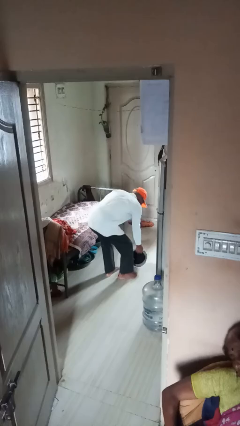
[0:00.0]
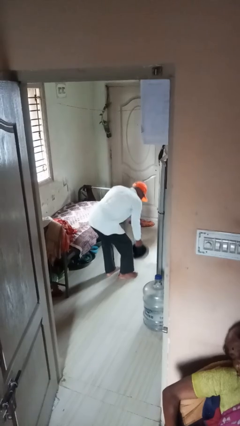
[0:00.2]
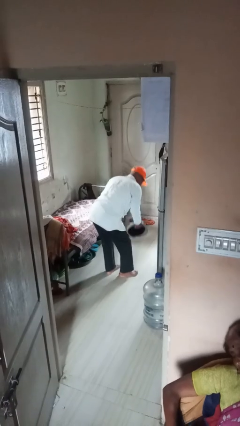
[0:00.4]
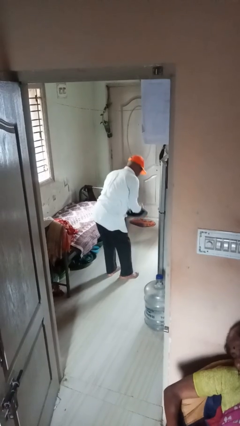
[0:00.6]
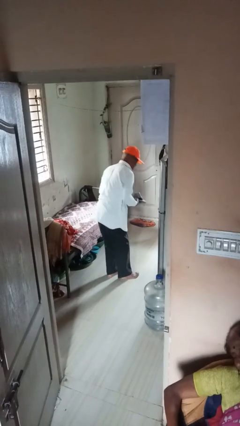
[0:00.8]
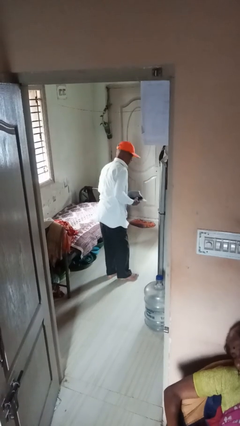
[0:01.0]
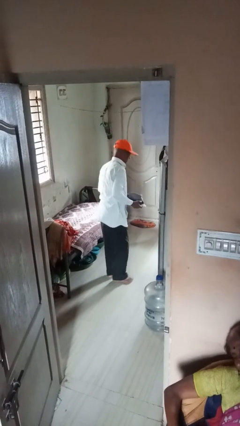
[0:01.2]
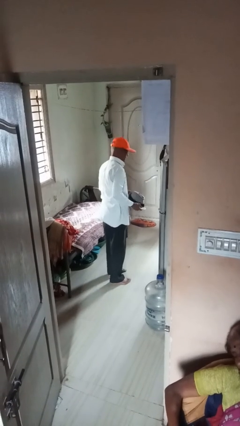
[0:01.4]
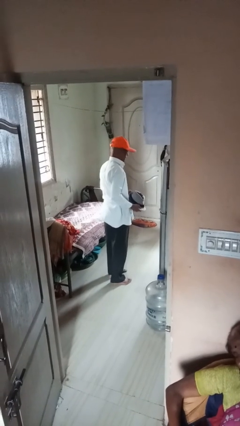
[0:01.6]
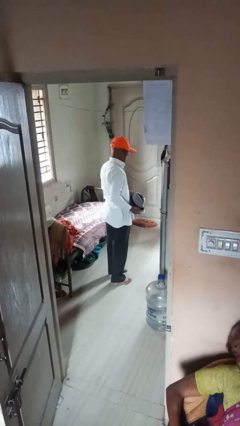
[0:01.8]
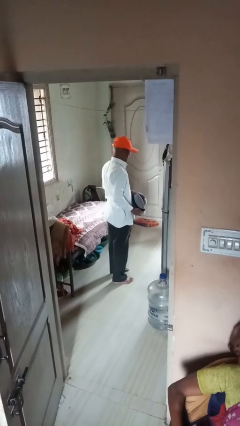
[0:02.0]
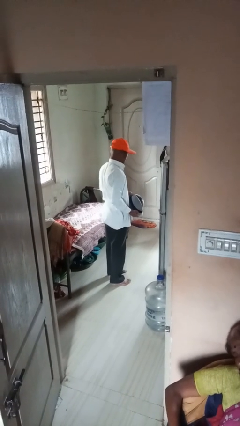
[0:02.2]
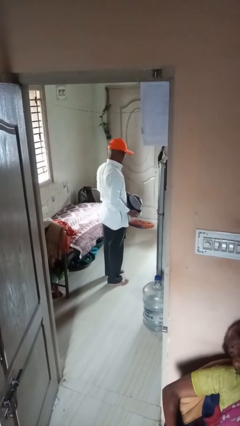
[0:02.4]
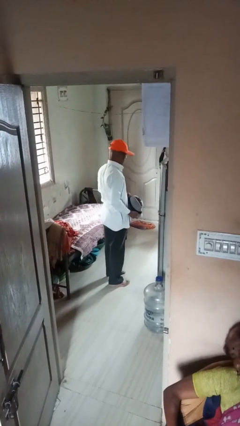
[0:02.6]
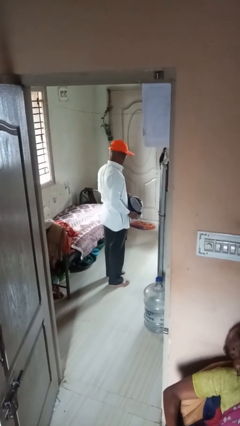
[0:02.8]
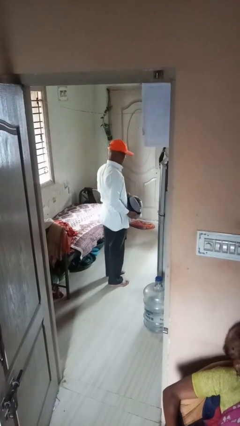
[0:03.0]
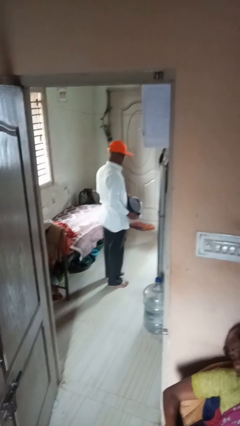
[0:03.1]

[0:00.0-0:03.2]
person picks up object from floor

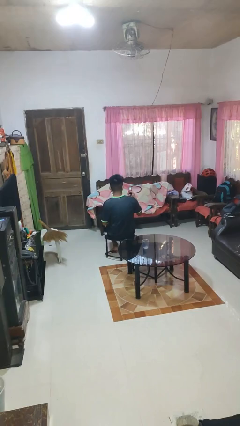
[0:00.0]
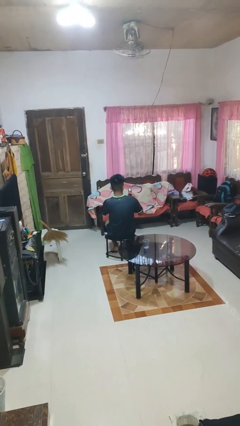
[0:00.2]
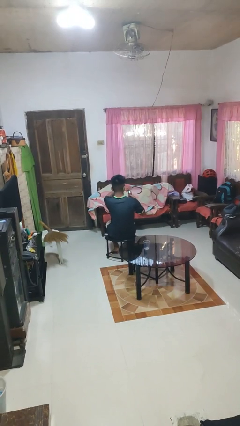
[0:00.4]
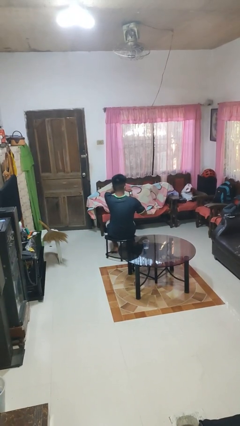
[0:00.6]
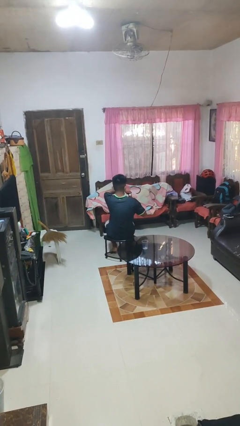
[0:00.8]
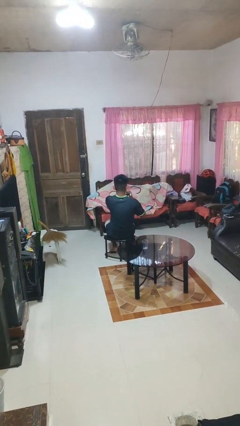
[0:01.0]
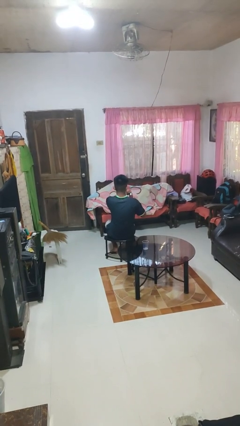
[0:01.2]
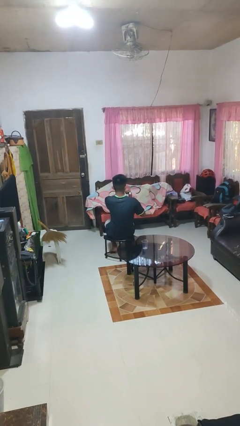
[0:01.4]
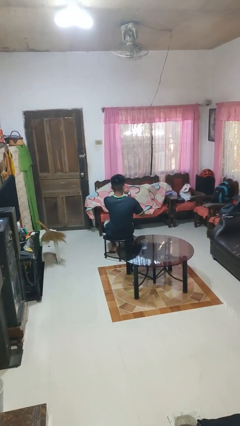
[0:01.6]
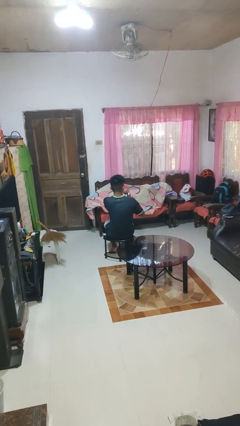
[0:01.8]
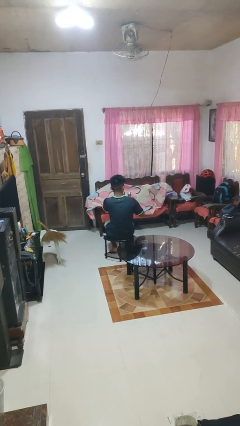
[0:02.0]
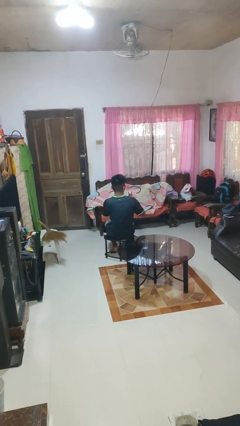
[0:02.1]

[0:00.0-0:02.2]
person opens beverage can

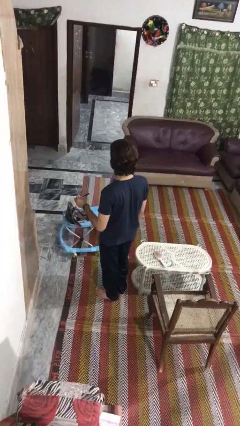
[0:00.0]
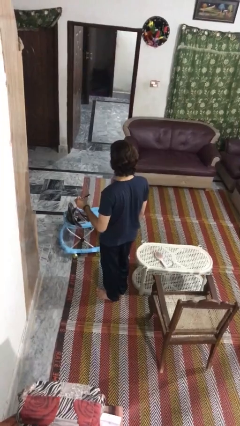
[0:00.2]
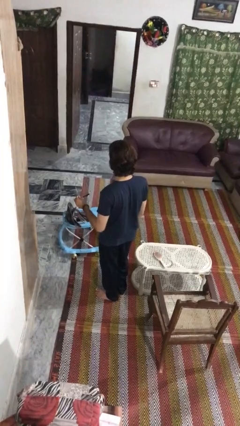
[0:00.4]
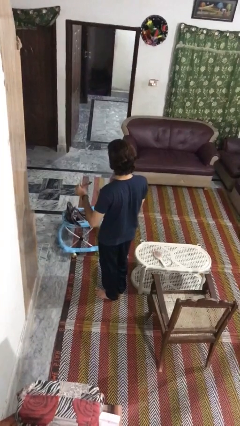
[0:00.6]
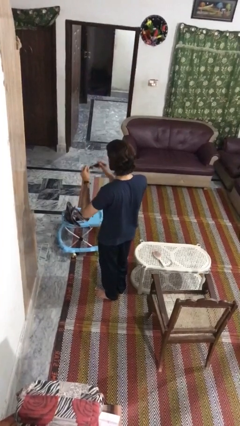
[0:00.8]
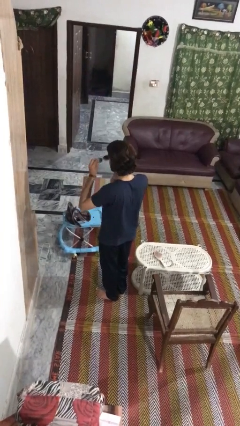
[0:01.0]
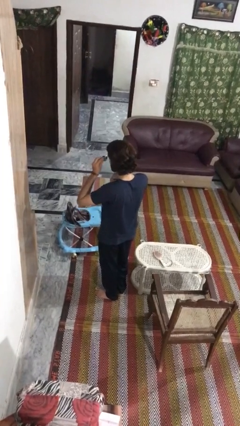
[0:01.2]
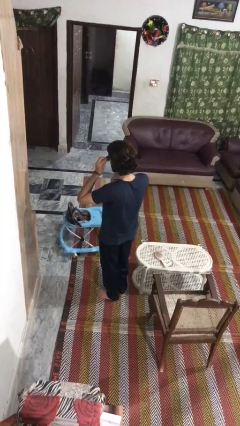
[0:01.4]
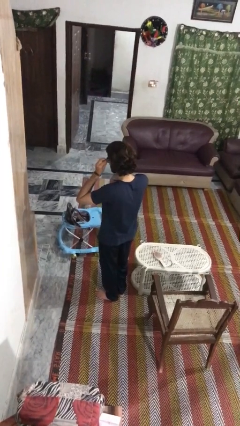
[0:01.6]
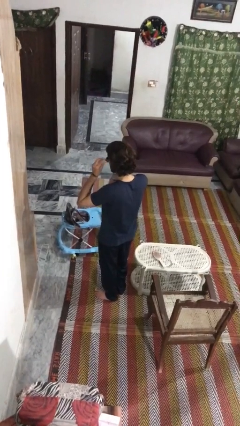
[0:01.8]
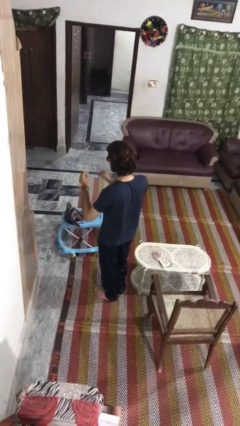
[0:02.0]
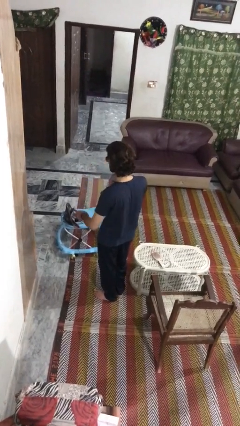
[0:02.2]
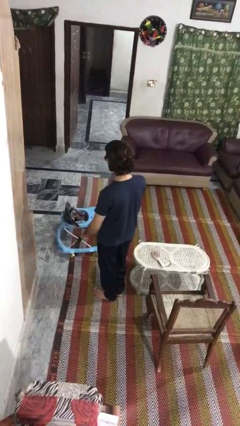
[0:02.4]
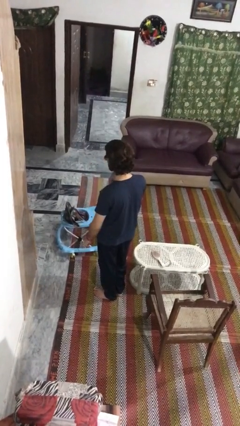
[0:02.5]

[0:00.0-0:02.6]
person puts on sunglasses

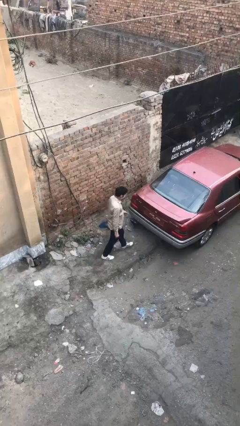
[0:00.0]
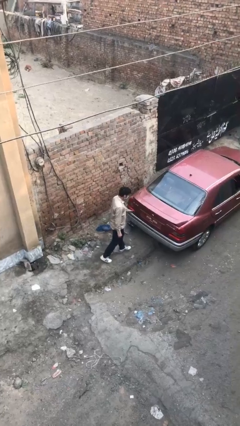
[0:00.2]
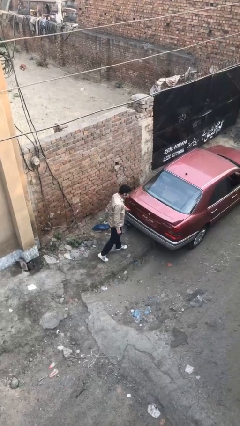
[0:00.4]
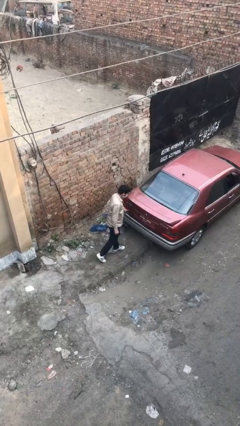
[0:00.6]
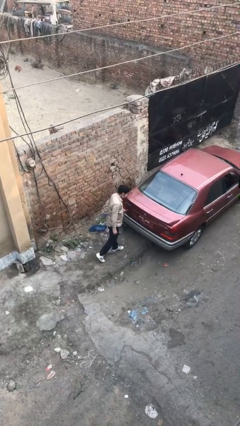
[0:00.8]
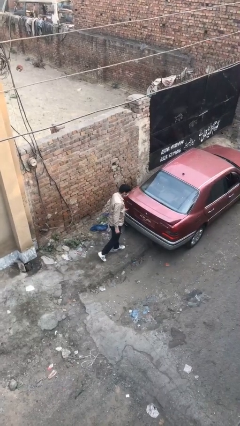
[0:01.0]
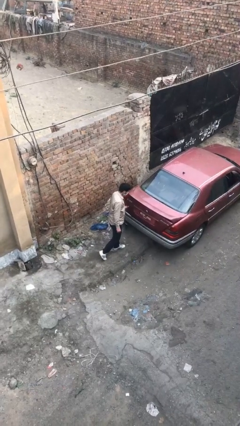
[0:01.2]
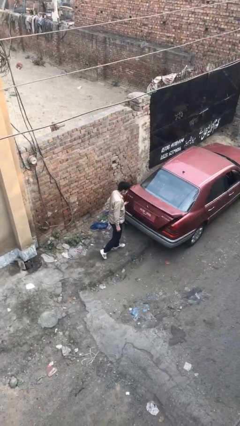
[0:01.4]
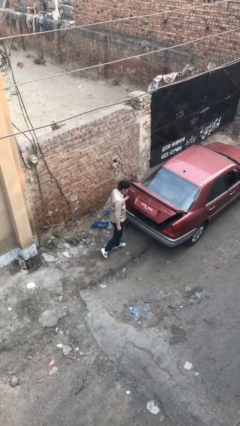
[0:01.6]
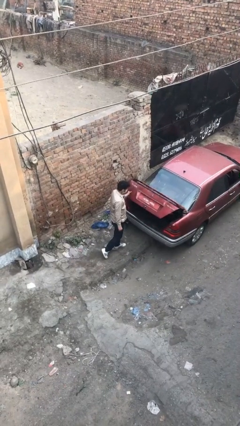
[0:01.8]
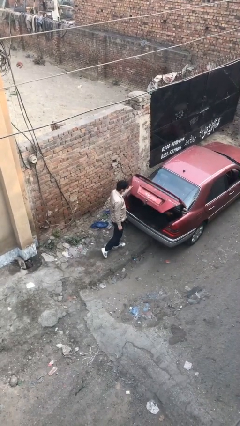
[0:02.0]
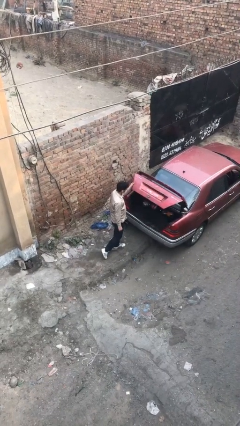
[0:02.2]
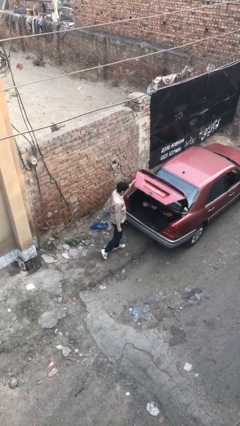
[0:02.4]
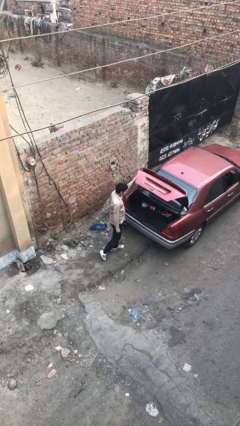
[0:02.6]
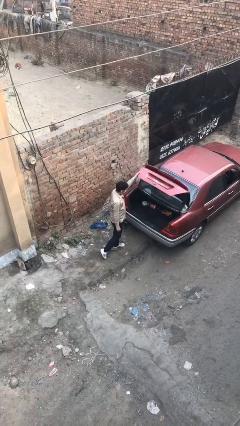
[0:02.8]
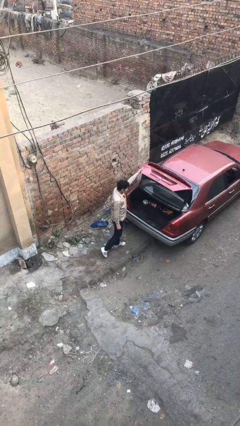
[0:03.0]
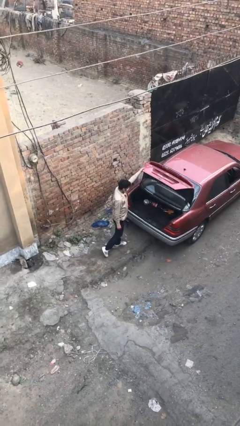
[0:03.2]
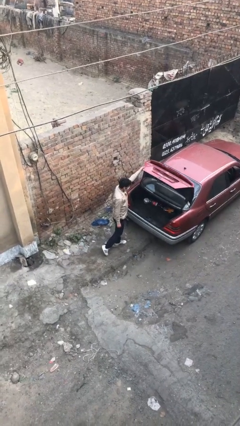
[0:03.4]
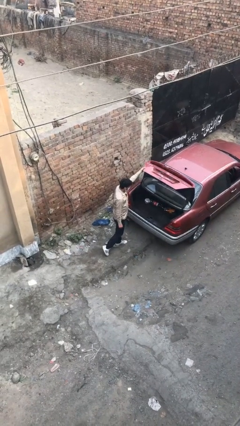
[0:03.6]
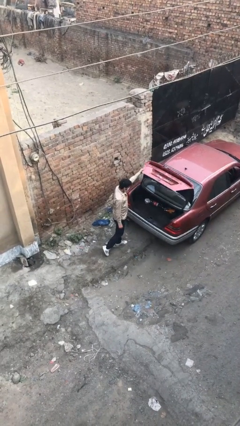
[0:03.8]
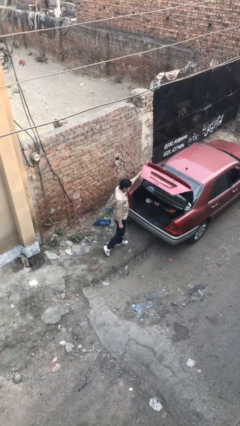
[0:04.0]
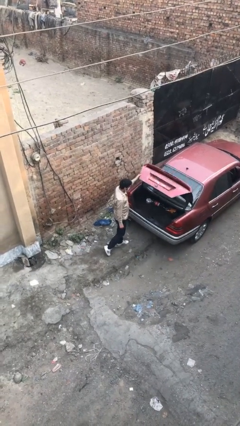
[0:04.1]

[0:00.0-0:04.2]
person opens car trunk

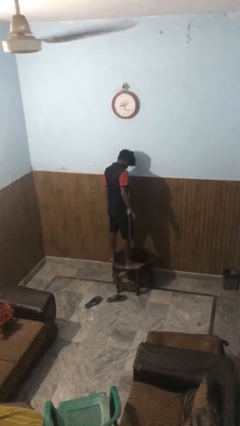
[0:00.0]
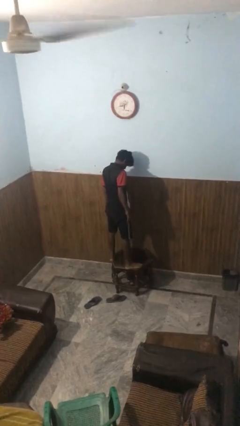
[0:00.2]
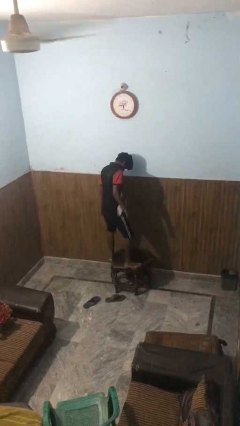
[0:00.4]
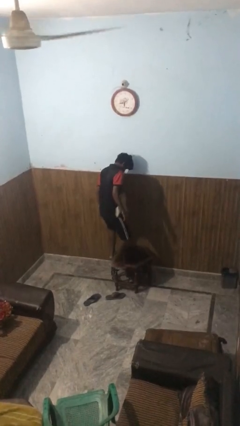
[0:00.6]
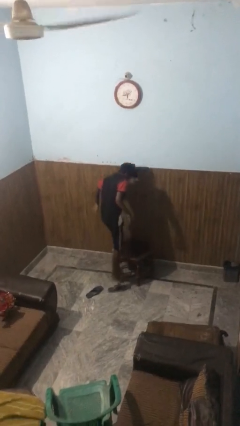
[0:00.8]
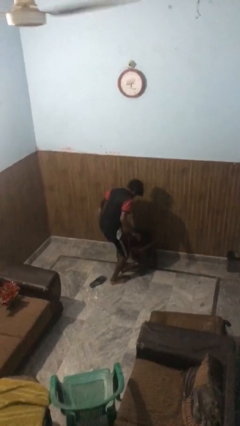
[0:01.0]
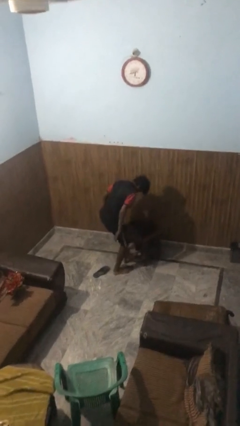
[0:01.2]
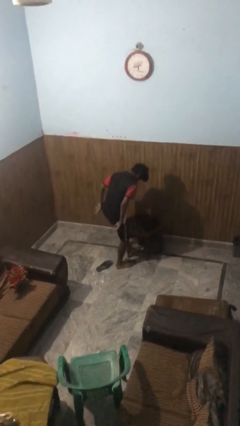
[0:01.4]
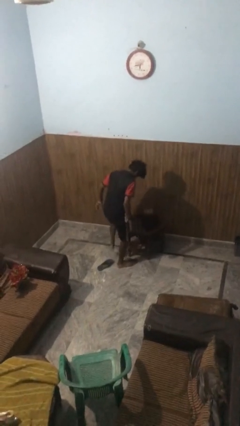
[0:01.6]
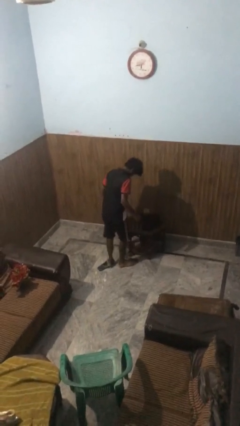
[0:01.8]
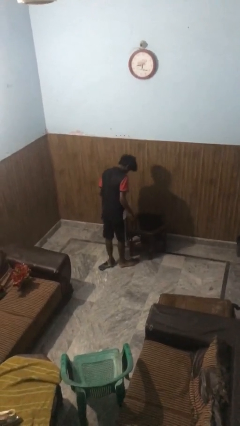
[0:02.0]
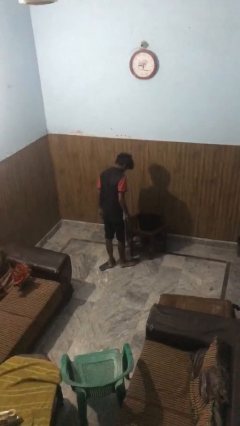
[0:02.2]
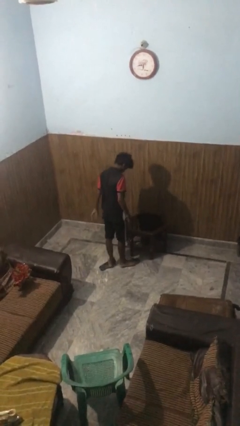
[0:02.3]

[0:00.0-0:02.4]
person climbs off table

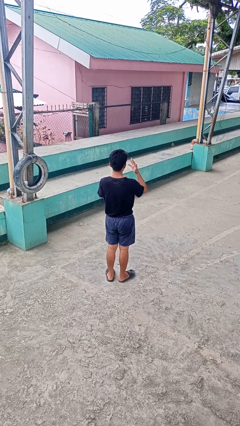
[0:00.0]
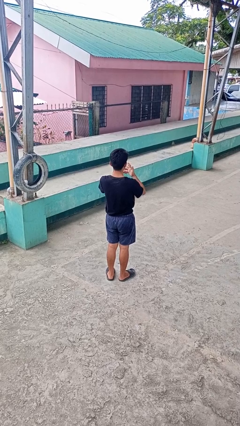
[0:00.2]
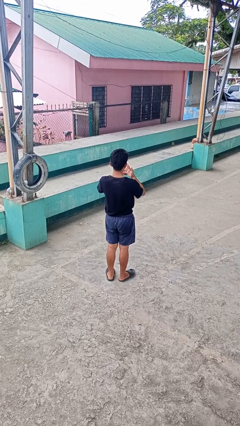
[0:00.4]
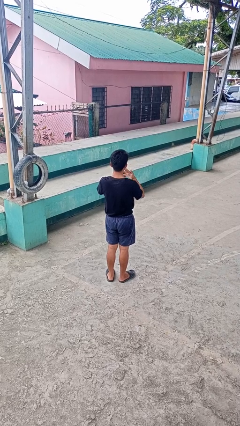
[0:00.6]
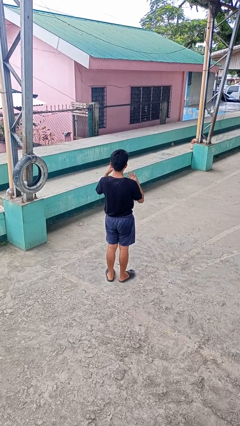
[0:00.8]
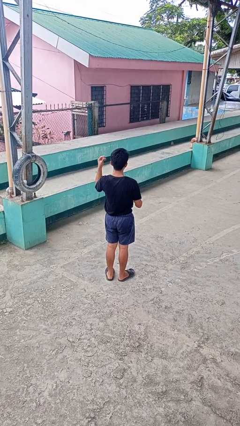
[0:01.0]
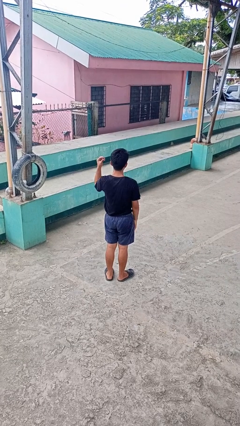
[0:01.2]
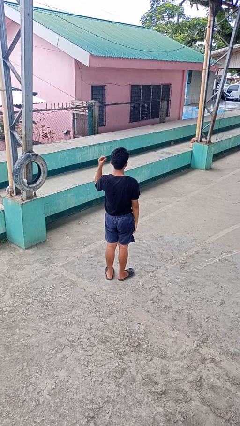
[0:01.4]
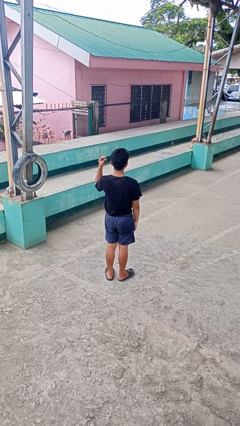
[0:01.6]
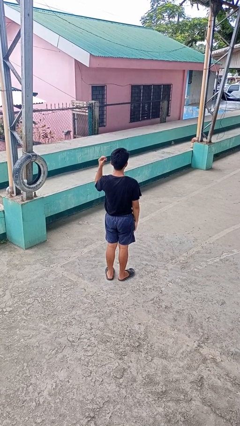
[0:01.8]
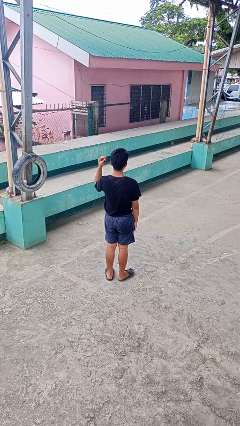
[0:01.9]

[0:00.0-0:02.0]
person takes off ring

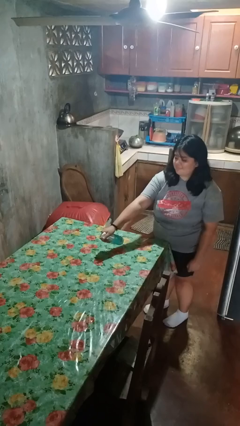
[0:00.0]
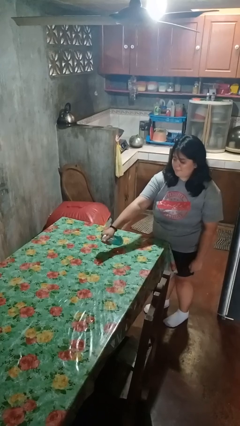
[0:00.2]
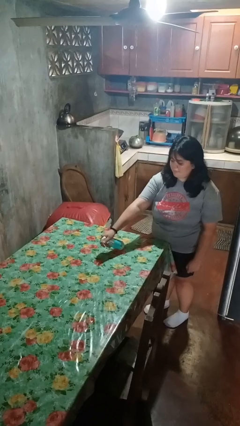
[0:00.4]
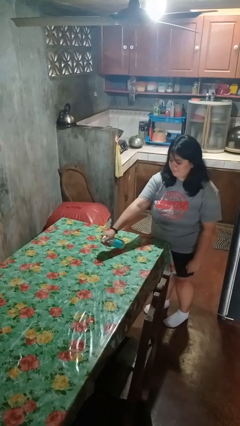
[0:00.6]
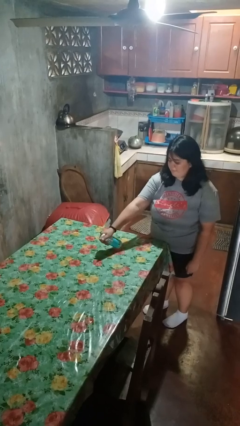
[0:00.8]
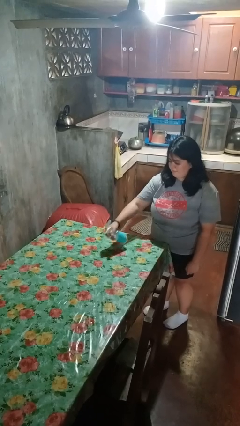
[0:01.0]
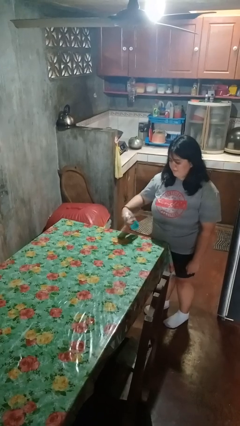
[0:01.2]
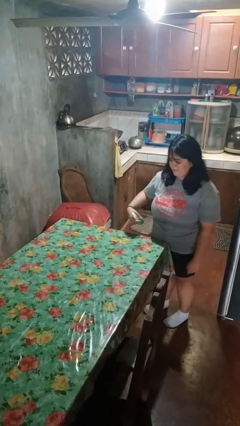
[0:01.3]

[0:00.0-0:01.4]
person sprays from bottle
